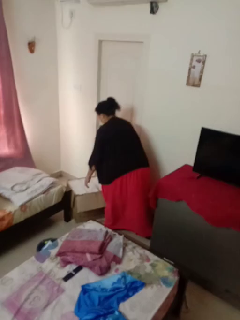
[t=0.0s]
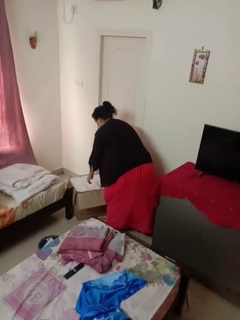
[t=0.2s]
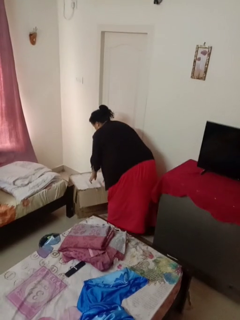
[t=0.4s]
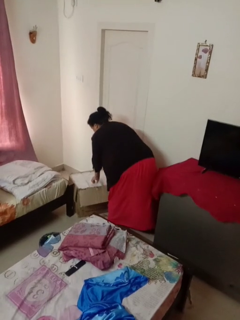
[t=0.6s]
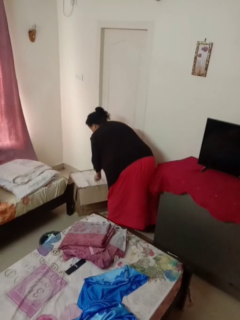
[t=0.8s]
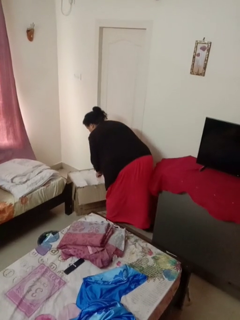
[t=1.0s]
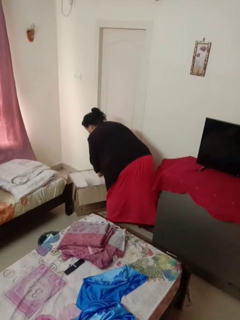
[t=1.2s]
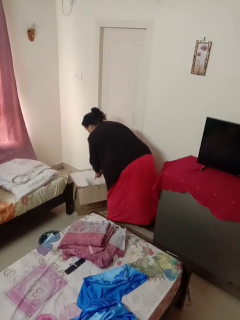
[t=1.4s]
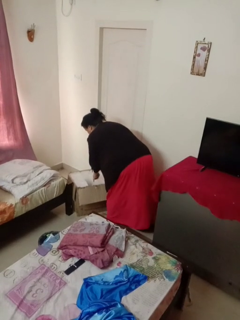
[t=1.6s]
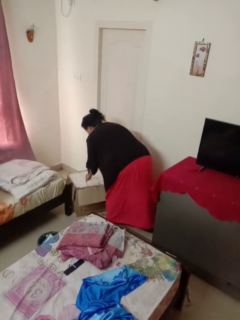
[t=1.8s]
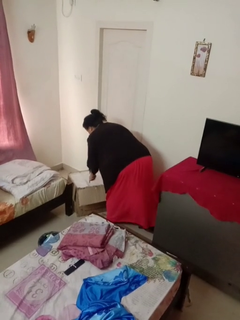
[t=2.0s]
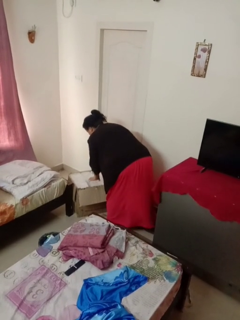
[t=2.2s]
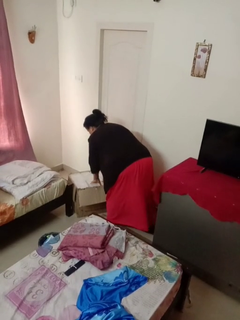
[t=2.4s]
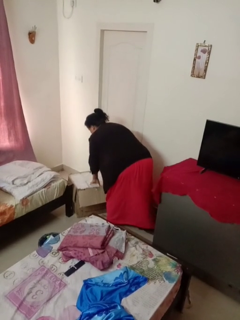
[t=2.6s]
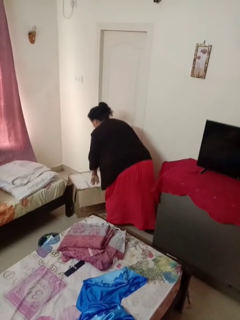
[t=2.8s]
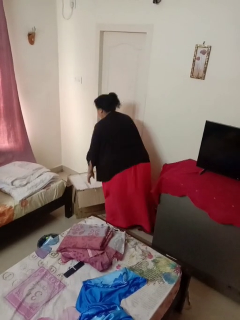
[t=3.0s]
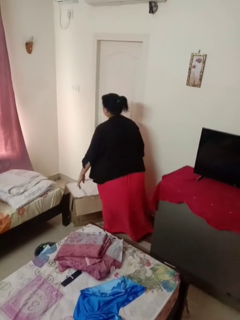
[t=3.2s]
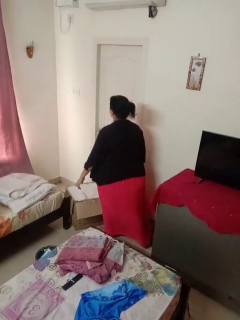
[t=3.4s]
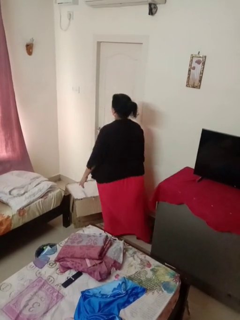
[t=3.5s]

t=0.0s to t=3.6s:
person searches in box

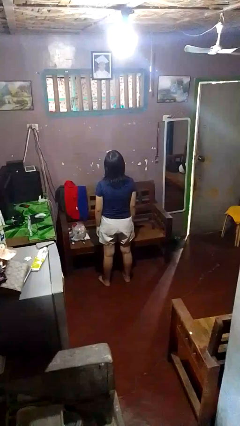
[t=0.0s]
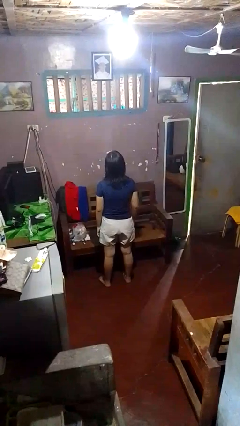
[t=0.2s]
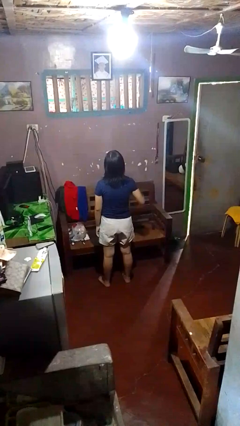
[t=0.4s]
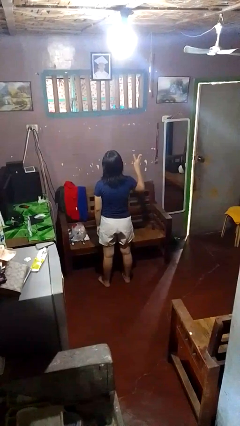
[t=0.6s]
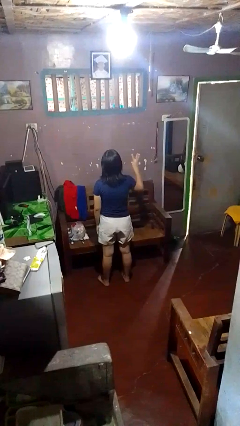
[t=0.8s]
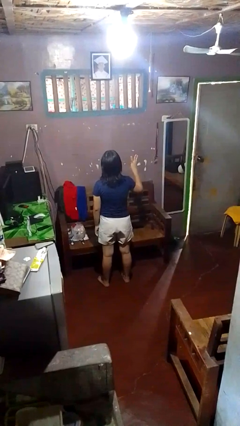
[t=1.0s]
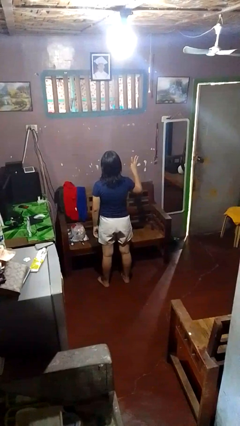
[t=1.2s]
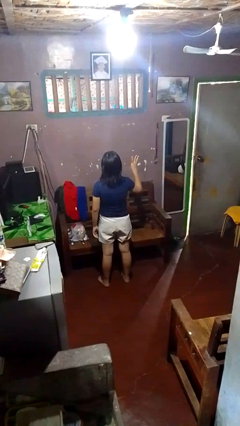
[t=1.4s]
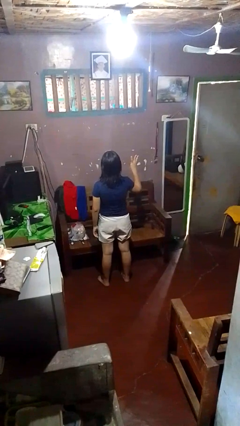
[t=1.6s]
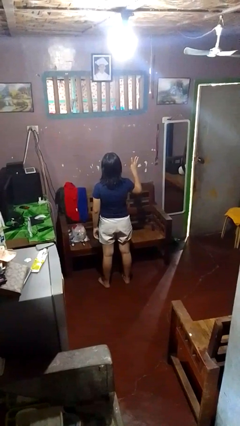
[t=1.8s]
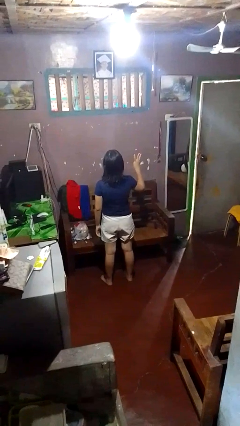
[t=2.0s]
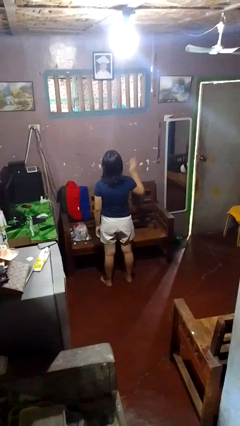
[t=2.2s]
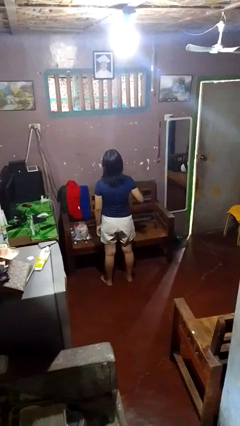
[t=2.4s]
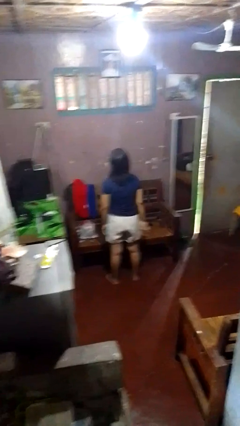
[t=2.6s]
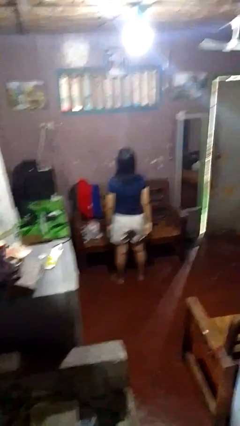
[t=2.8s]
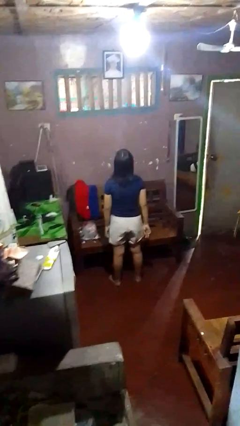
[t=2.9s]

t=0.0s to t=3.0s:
person gestures number three

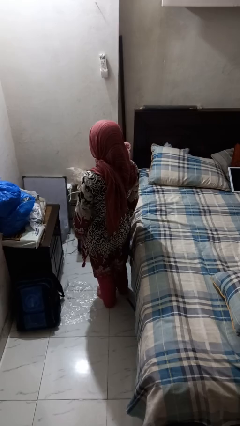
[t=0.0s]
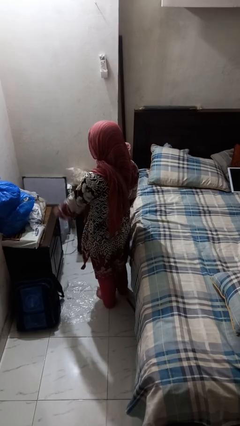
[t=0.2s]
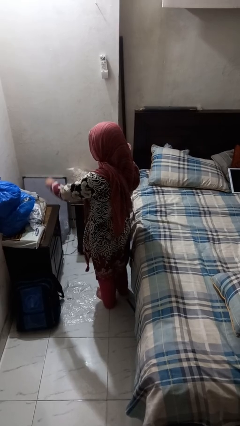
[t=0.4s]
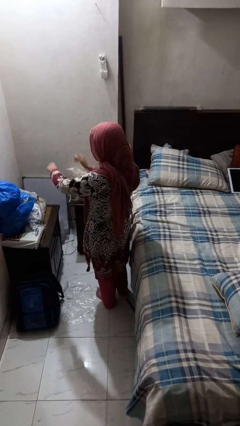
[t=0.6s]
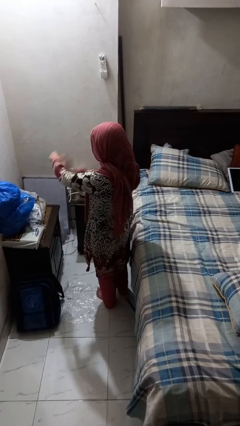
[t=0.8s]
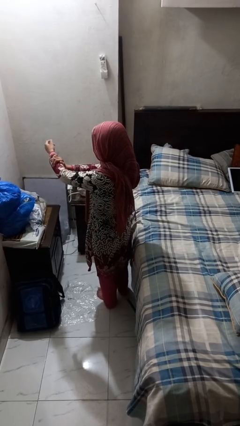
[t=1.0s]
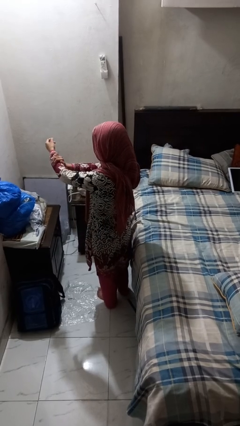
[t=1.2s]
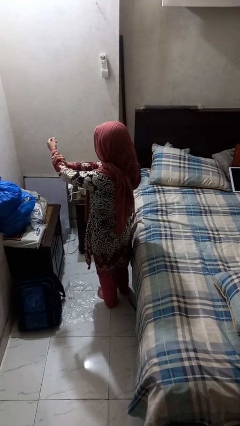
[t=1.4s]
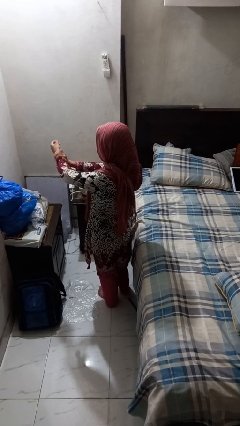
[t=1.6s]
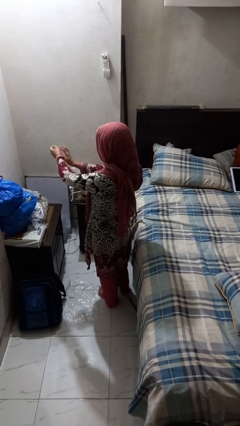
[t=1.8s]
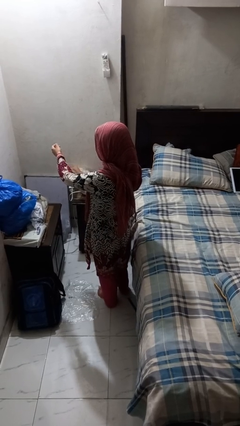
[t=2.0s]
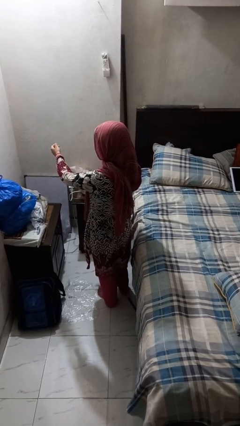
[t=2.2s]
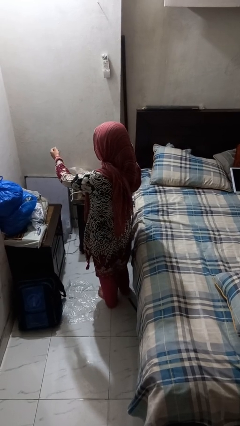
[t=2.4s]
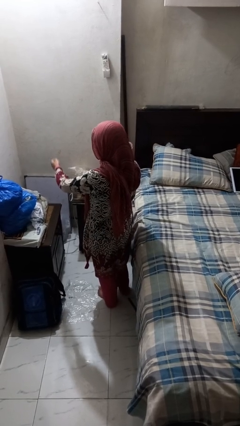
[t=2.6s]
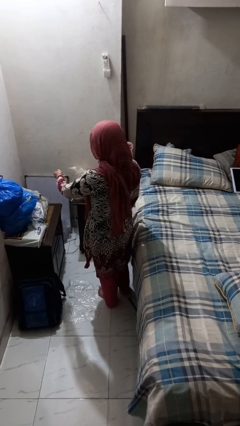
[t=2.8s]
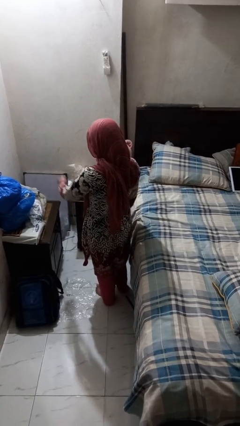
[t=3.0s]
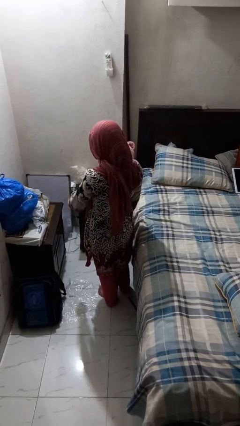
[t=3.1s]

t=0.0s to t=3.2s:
person swats bug

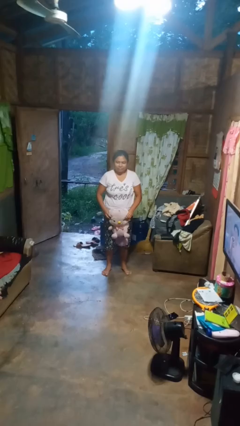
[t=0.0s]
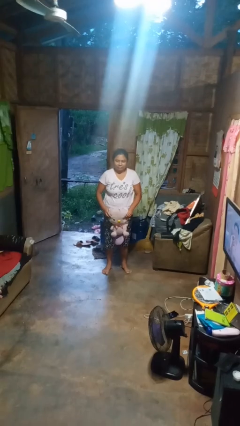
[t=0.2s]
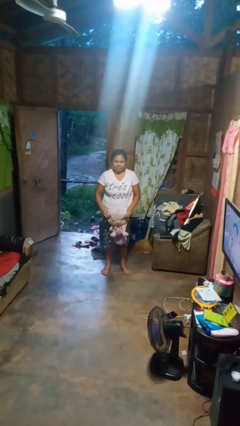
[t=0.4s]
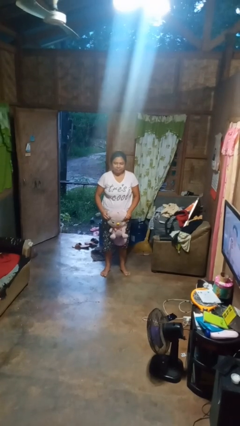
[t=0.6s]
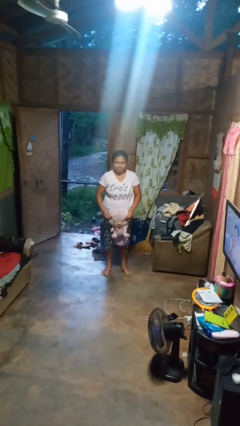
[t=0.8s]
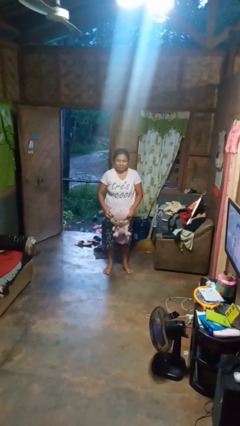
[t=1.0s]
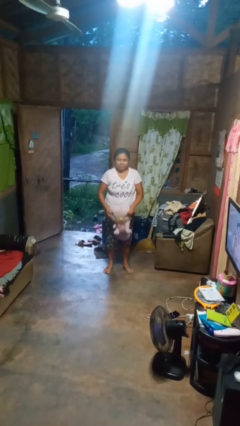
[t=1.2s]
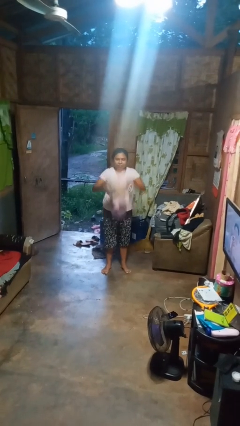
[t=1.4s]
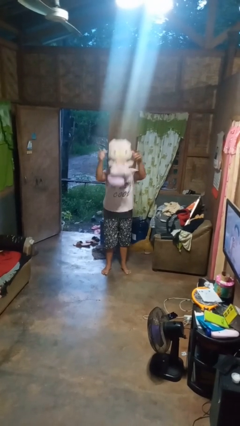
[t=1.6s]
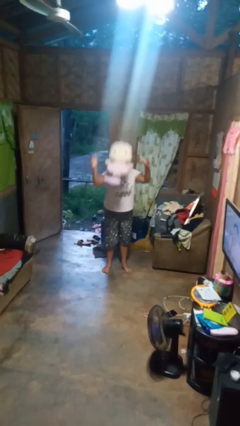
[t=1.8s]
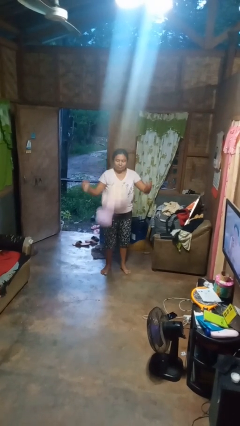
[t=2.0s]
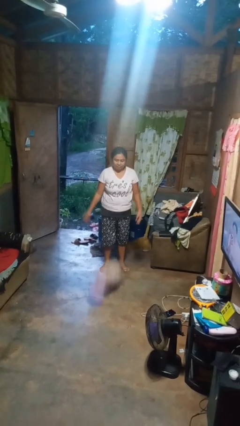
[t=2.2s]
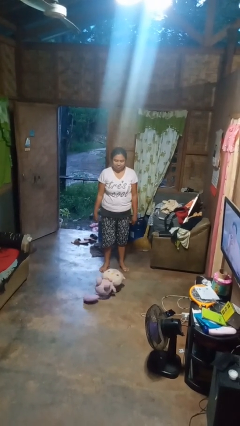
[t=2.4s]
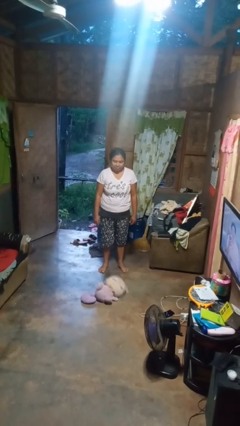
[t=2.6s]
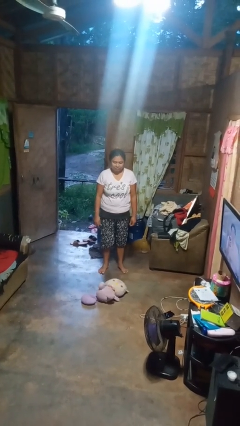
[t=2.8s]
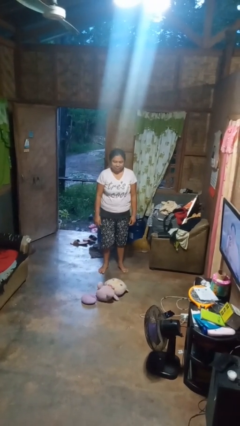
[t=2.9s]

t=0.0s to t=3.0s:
person throws object into air

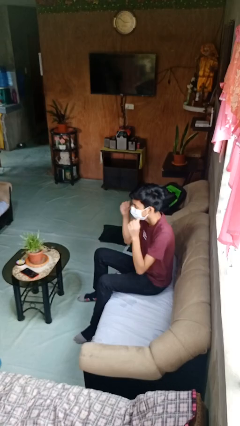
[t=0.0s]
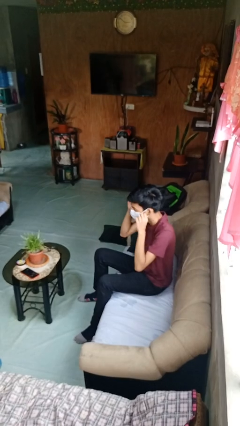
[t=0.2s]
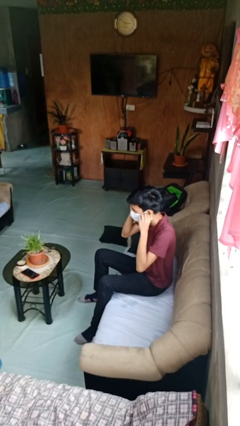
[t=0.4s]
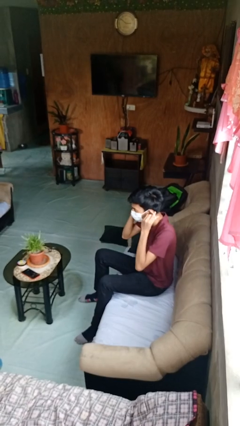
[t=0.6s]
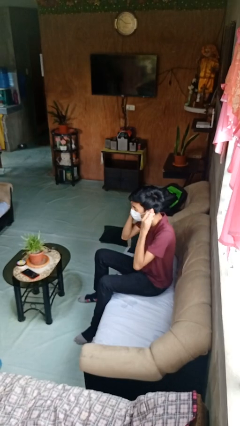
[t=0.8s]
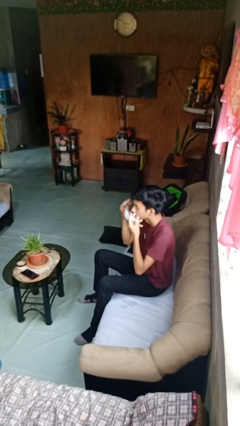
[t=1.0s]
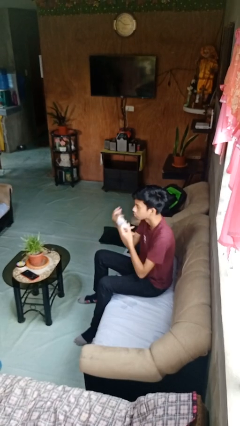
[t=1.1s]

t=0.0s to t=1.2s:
person takes off facemask

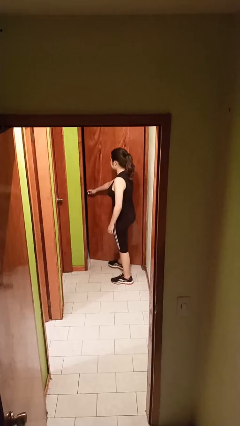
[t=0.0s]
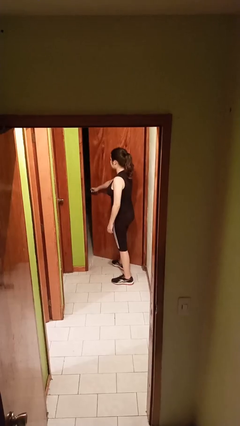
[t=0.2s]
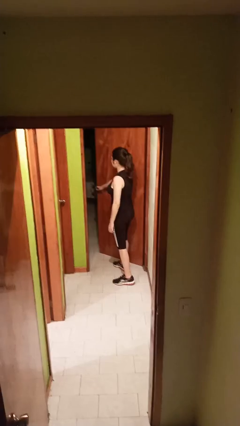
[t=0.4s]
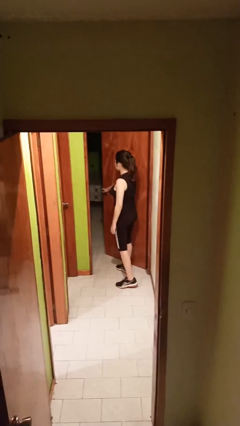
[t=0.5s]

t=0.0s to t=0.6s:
person opens facility door

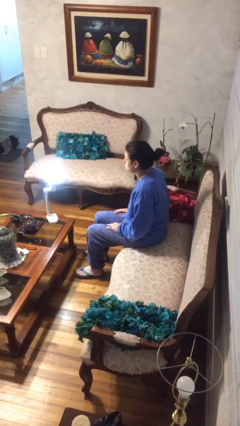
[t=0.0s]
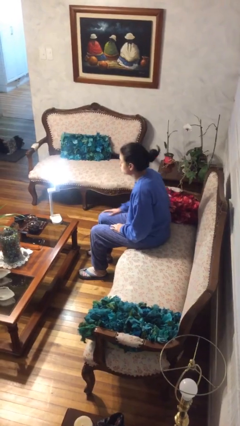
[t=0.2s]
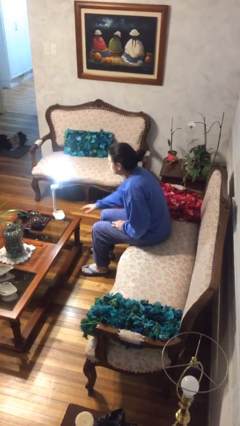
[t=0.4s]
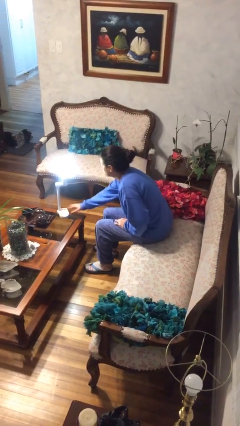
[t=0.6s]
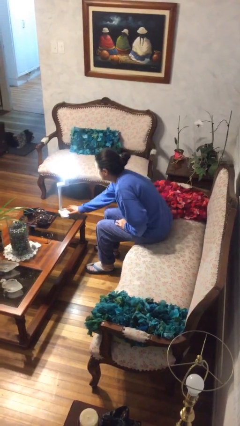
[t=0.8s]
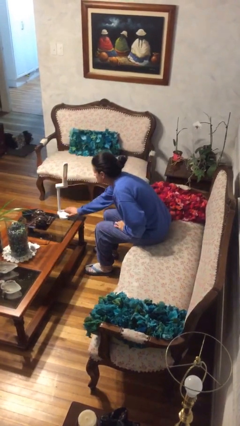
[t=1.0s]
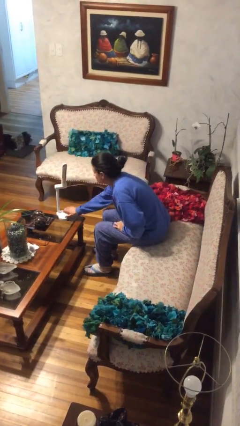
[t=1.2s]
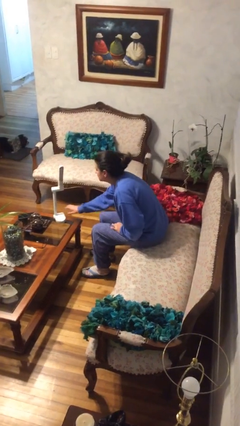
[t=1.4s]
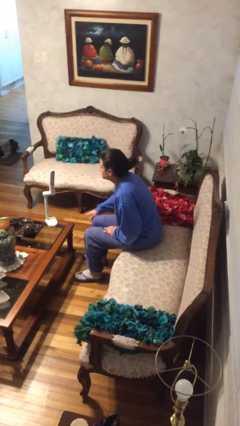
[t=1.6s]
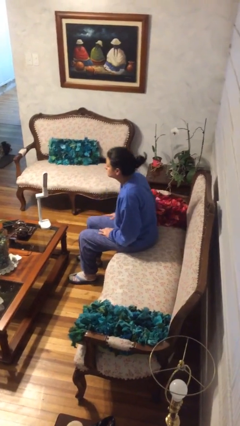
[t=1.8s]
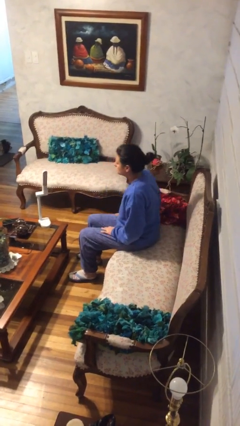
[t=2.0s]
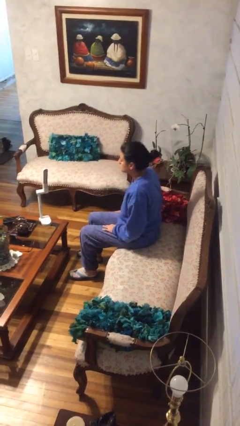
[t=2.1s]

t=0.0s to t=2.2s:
person turns off lamp

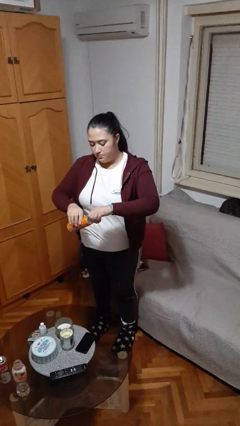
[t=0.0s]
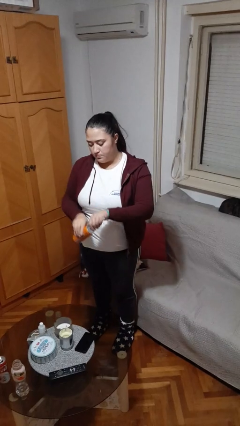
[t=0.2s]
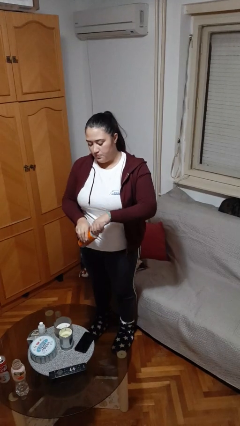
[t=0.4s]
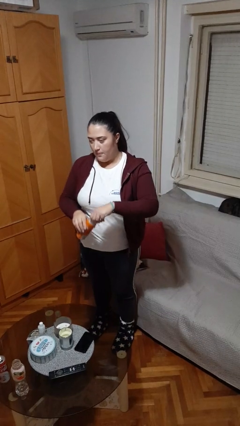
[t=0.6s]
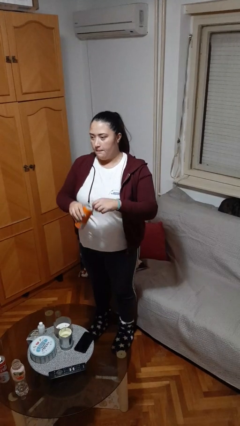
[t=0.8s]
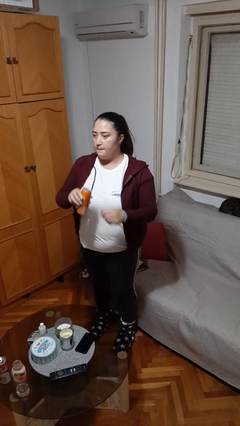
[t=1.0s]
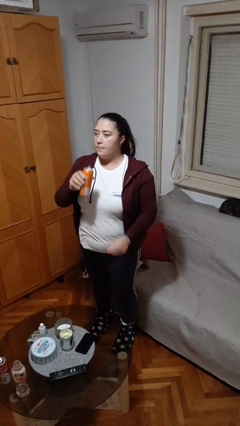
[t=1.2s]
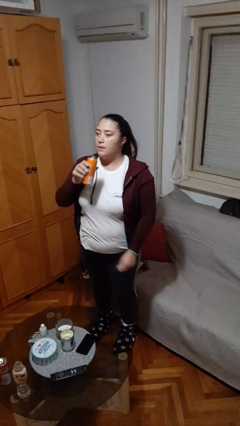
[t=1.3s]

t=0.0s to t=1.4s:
person opens beverage can
